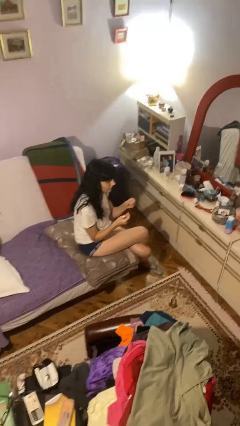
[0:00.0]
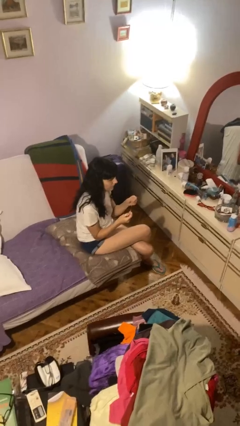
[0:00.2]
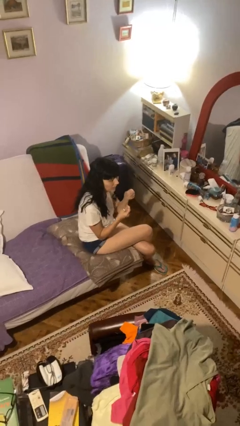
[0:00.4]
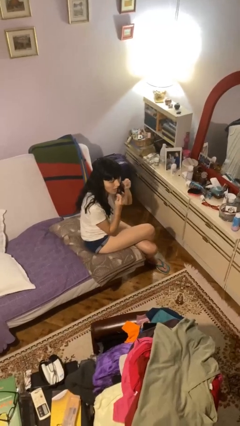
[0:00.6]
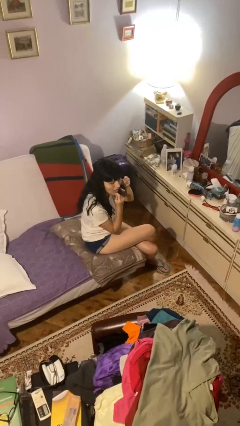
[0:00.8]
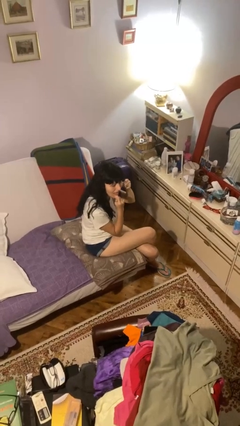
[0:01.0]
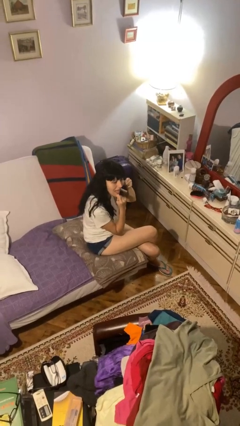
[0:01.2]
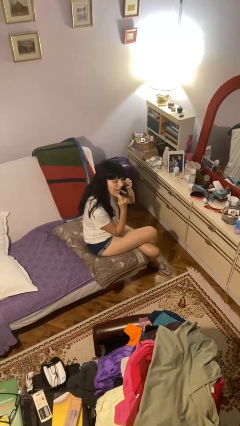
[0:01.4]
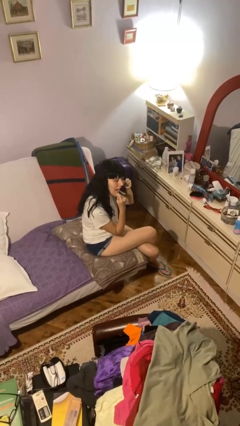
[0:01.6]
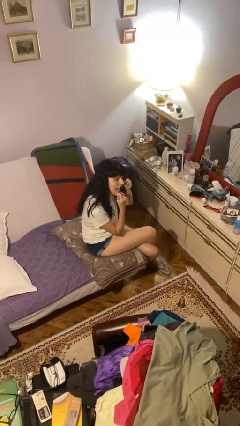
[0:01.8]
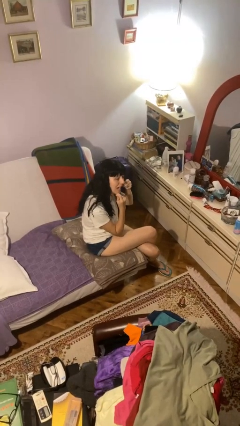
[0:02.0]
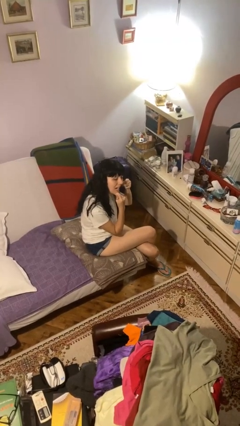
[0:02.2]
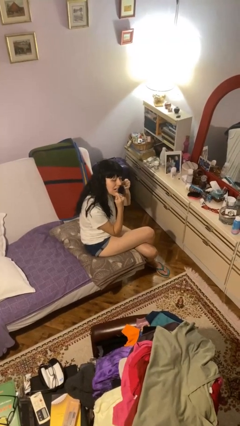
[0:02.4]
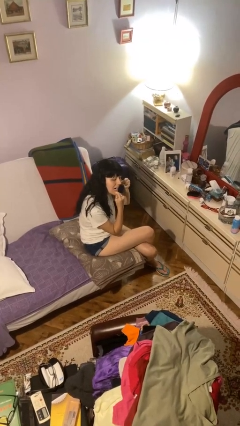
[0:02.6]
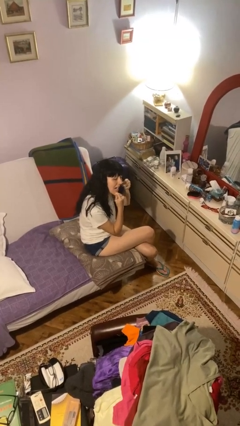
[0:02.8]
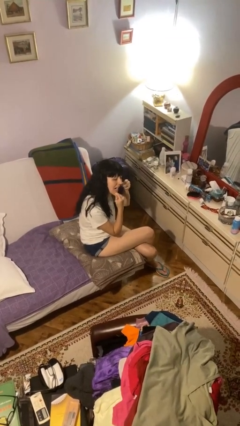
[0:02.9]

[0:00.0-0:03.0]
person flosses

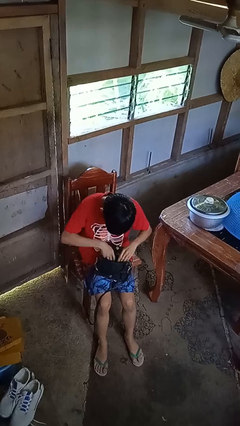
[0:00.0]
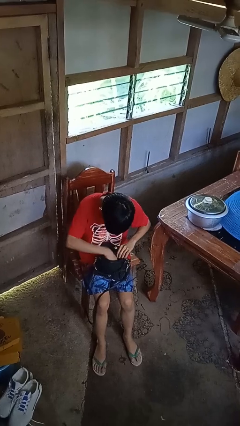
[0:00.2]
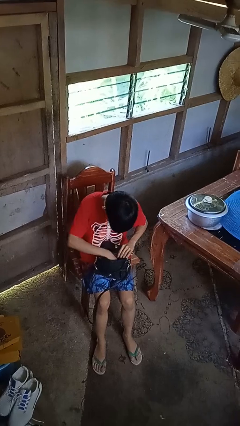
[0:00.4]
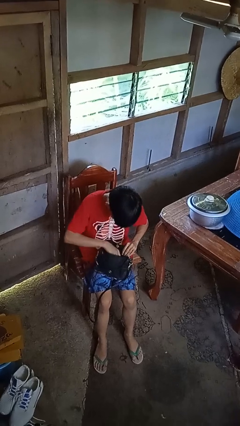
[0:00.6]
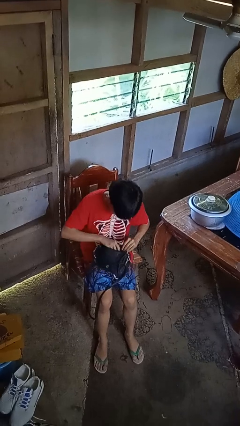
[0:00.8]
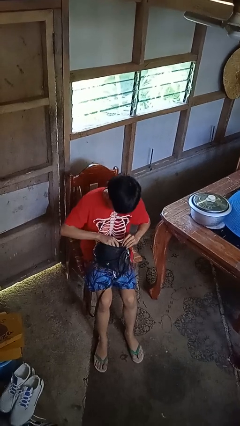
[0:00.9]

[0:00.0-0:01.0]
person takes object from purse

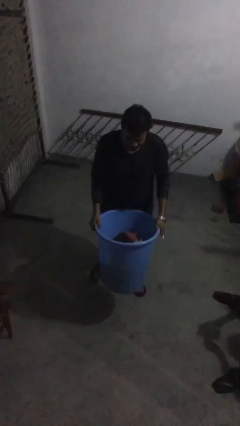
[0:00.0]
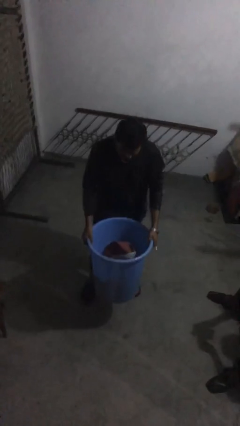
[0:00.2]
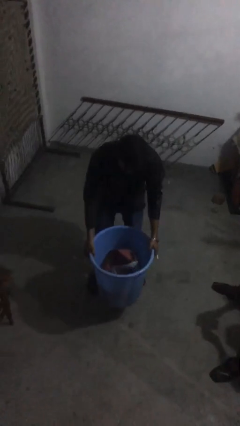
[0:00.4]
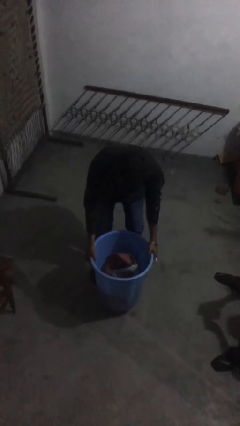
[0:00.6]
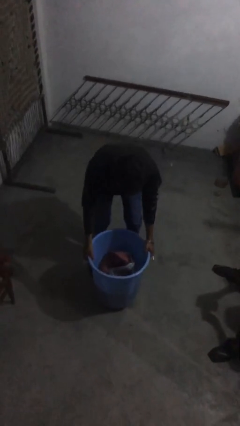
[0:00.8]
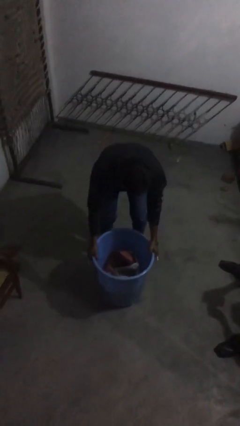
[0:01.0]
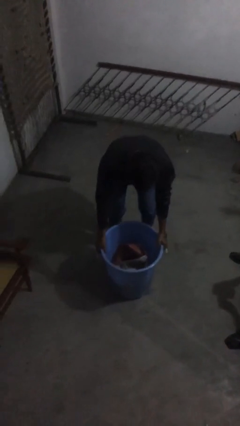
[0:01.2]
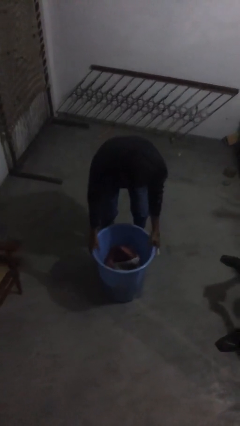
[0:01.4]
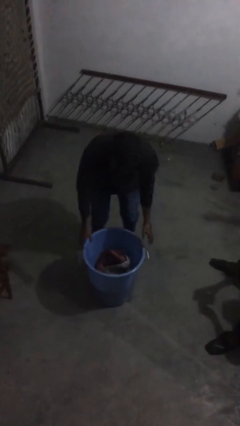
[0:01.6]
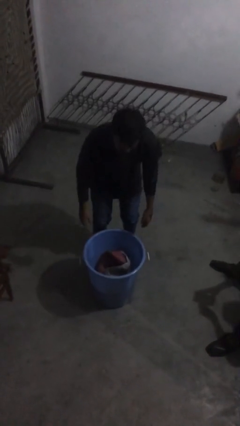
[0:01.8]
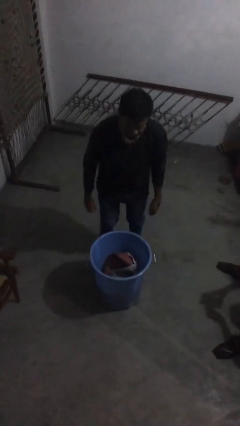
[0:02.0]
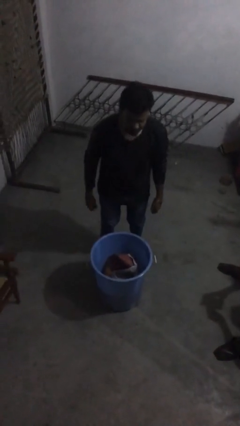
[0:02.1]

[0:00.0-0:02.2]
person puts down object on floor

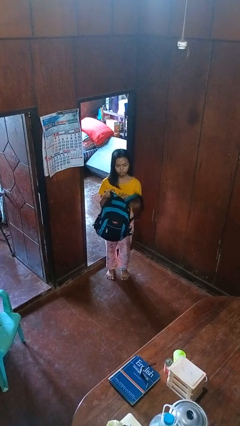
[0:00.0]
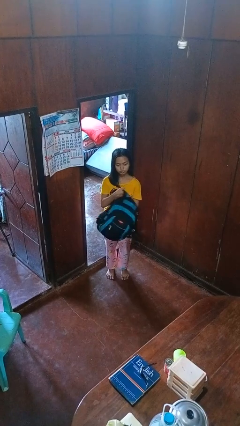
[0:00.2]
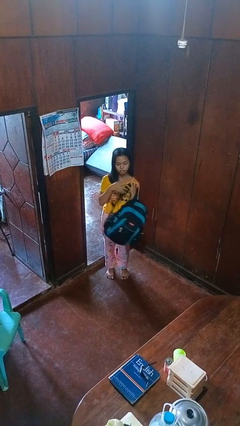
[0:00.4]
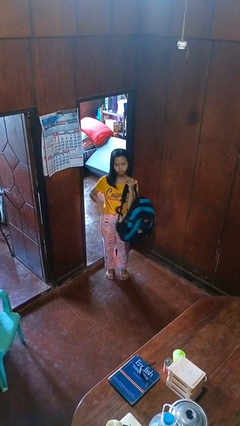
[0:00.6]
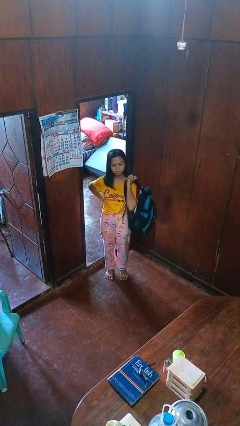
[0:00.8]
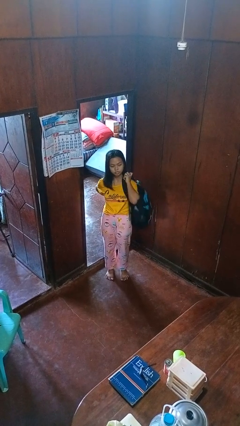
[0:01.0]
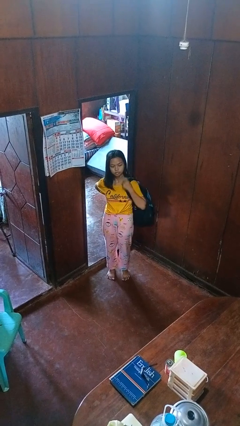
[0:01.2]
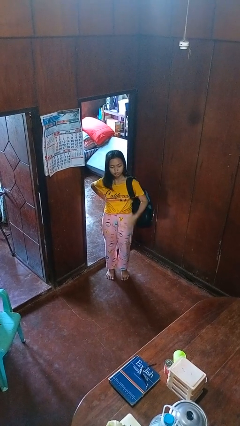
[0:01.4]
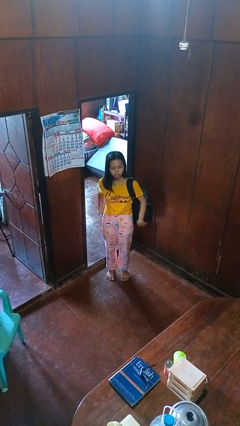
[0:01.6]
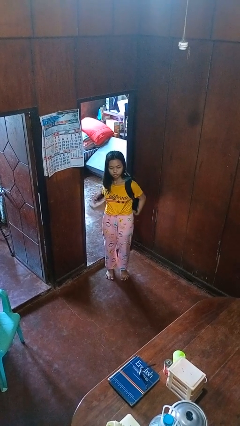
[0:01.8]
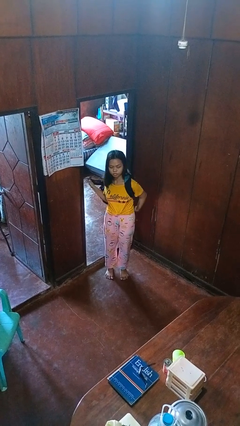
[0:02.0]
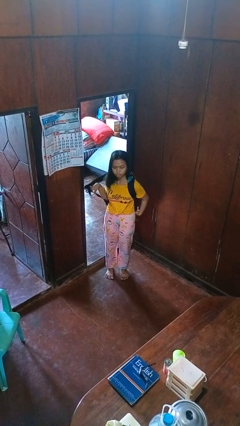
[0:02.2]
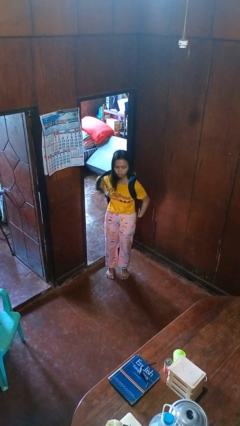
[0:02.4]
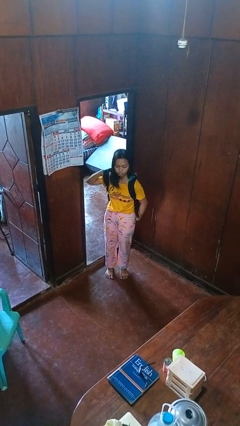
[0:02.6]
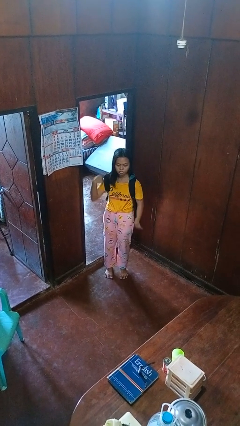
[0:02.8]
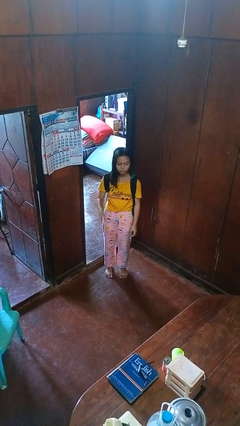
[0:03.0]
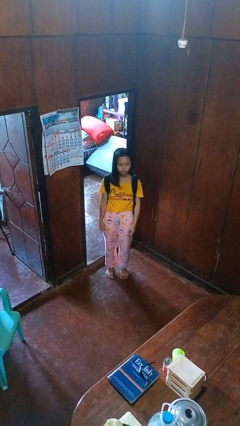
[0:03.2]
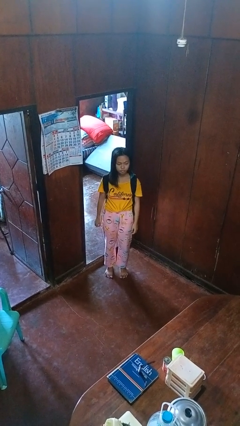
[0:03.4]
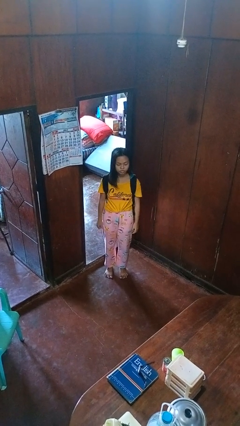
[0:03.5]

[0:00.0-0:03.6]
person puts on backpack

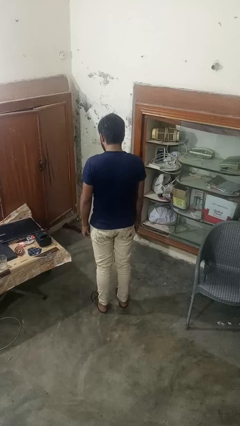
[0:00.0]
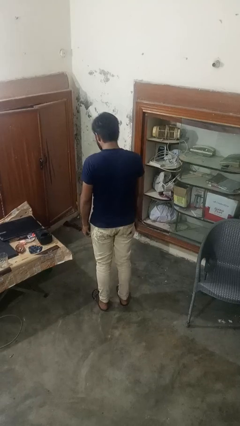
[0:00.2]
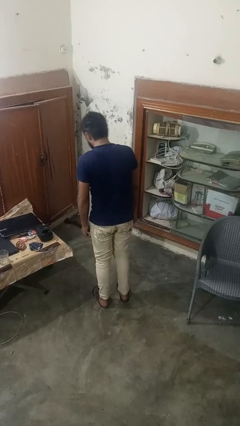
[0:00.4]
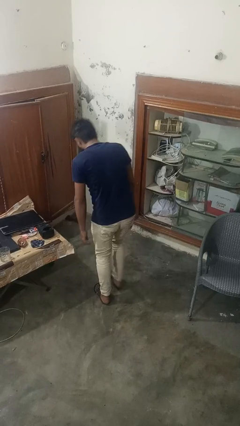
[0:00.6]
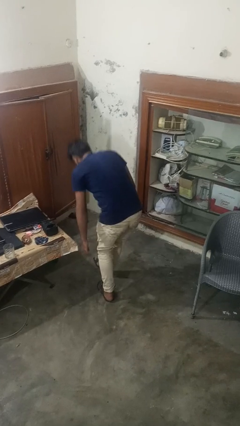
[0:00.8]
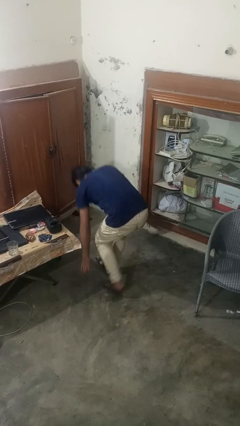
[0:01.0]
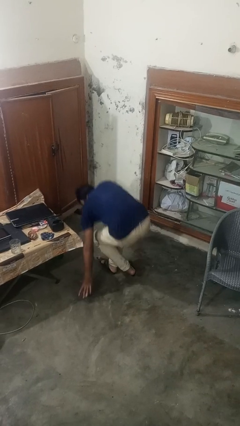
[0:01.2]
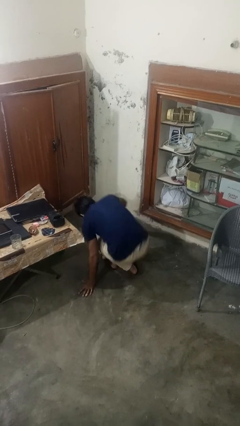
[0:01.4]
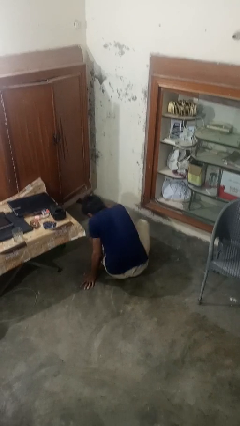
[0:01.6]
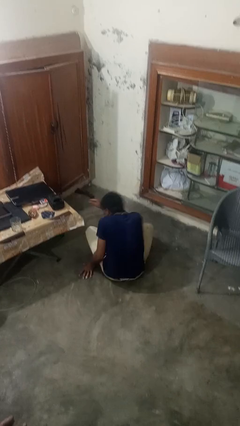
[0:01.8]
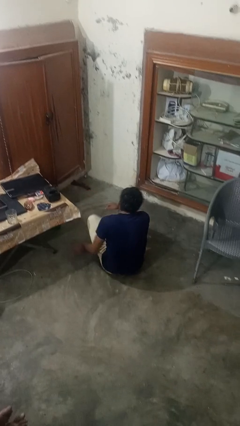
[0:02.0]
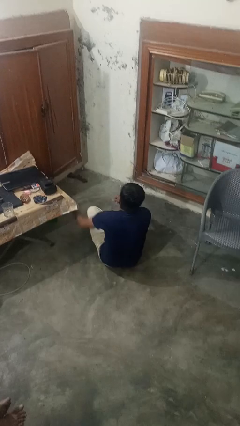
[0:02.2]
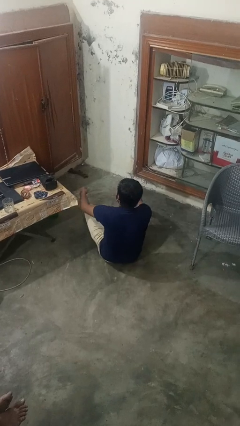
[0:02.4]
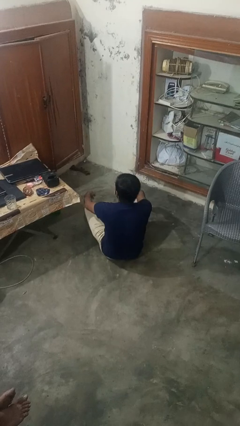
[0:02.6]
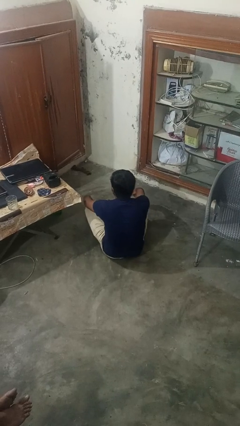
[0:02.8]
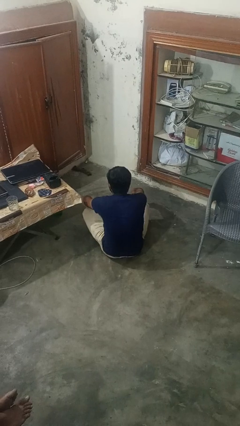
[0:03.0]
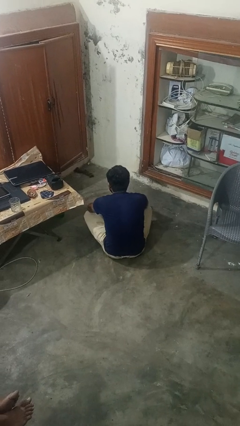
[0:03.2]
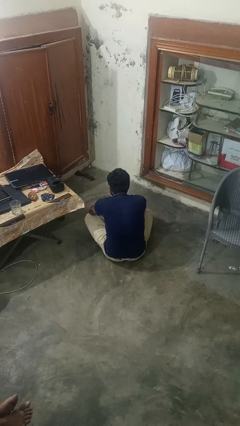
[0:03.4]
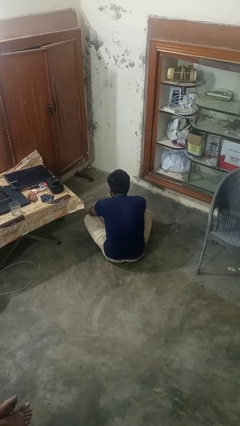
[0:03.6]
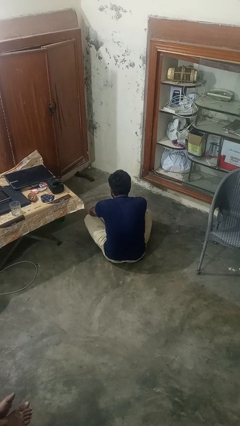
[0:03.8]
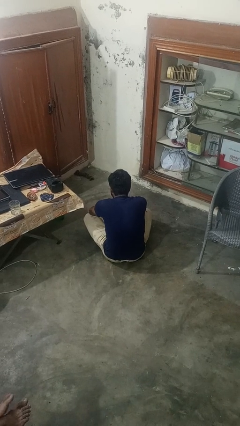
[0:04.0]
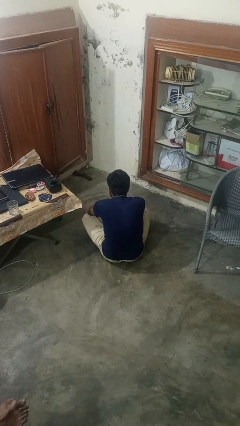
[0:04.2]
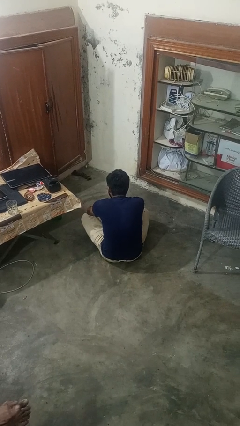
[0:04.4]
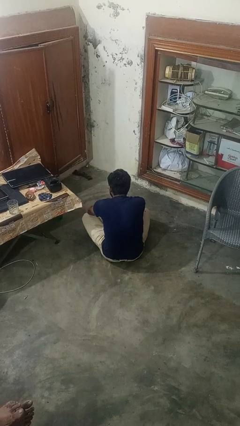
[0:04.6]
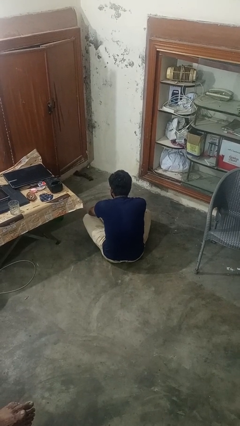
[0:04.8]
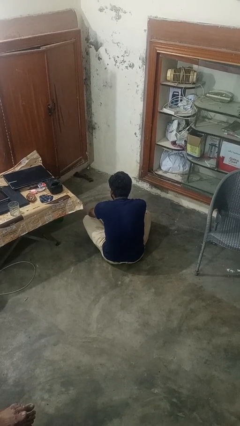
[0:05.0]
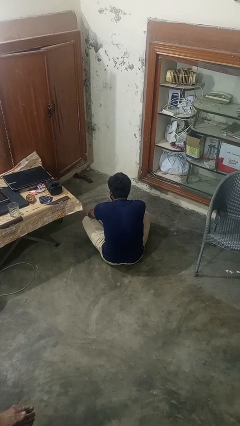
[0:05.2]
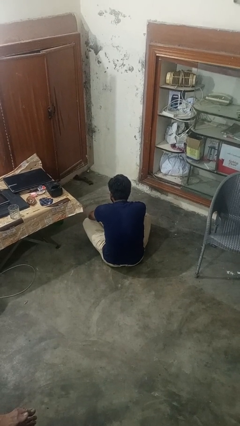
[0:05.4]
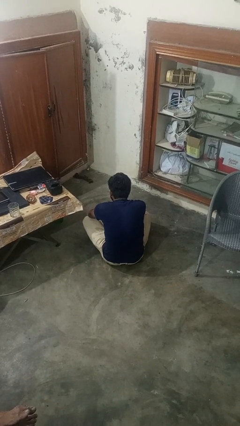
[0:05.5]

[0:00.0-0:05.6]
person sits crisscross

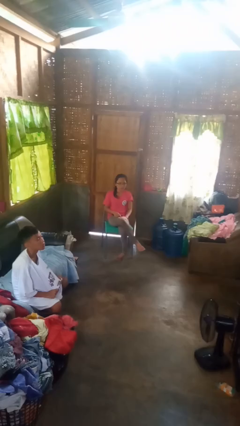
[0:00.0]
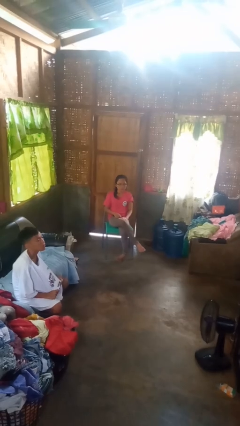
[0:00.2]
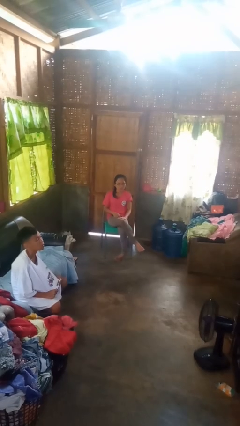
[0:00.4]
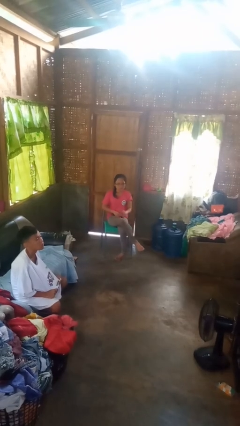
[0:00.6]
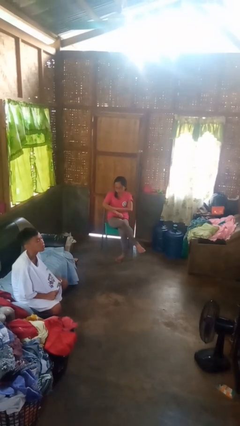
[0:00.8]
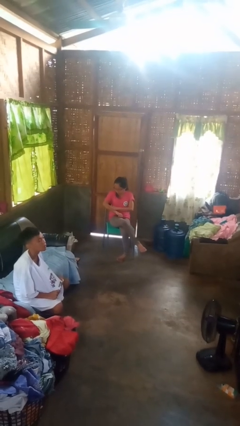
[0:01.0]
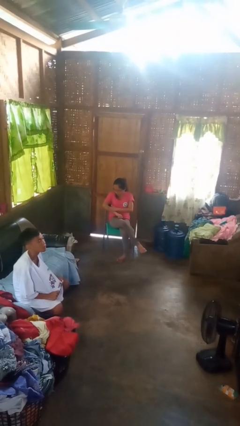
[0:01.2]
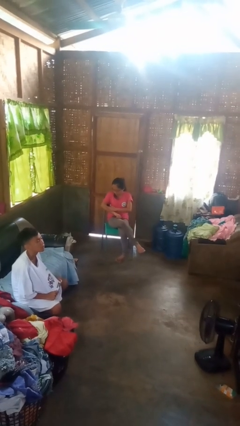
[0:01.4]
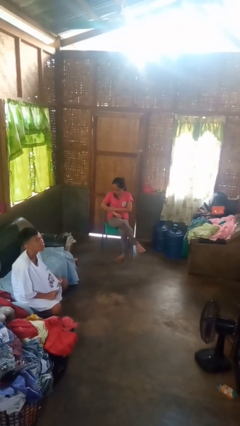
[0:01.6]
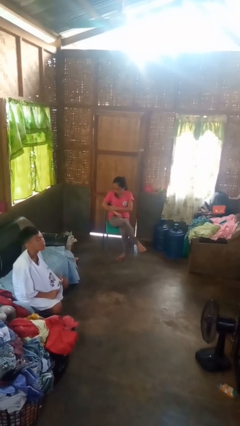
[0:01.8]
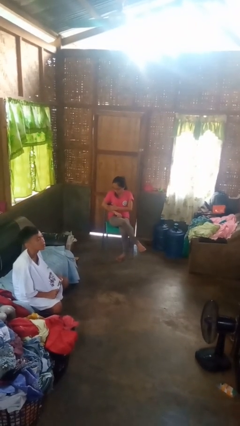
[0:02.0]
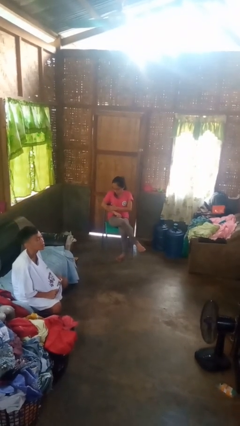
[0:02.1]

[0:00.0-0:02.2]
person swats bug
